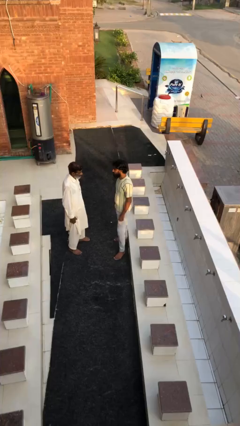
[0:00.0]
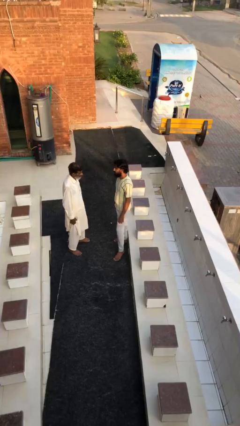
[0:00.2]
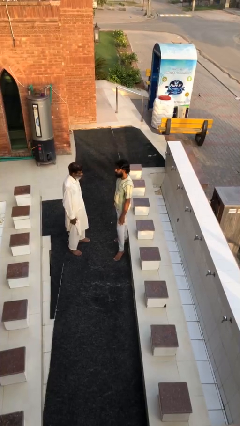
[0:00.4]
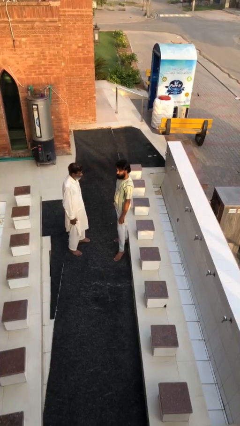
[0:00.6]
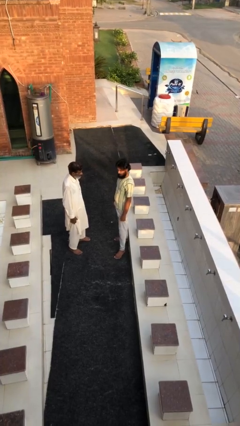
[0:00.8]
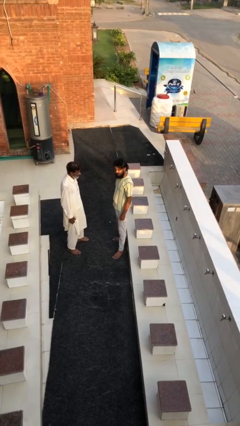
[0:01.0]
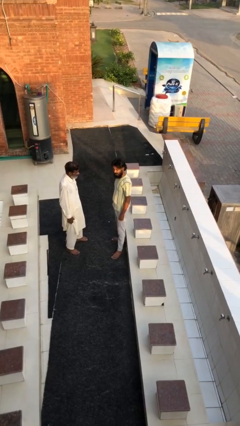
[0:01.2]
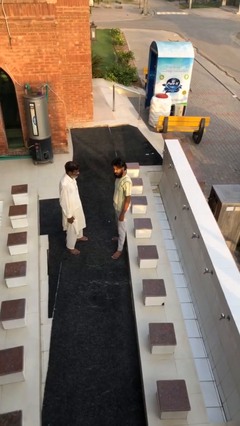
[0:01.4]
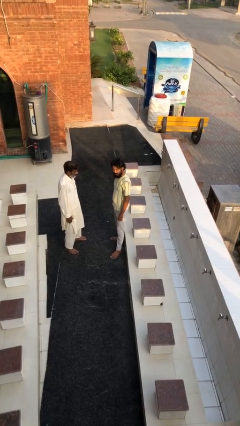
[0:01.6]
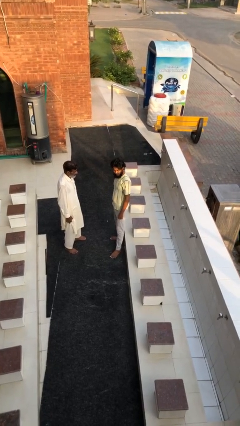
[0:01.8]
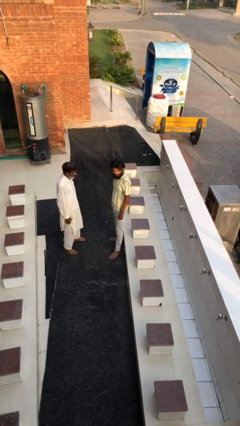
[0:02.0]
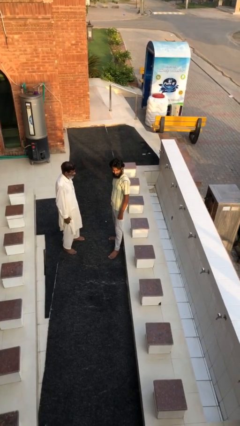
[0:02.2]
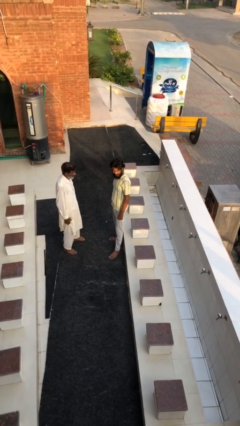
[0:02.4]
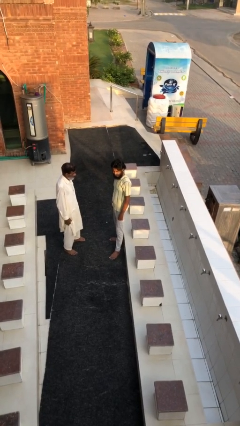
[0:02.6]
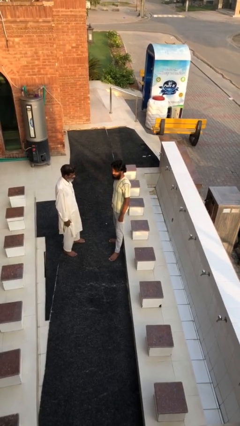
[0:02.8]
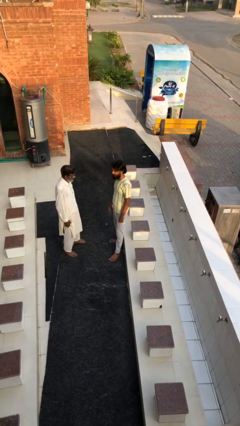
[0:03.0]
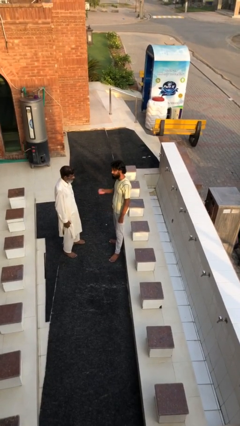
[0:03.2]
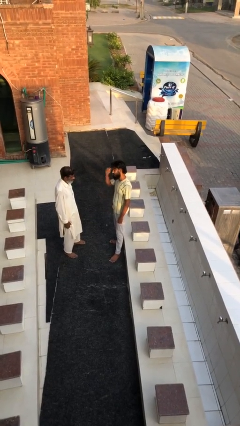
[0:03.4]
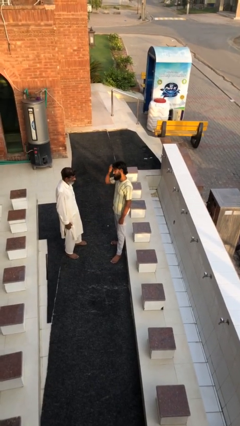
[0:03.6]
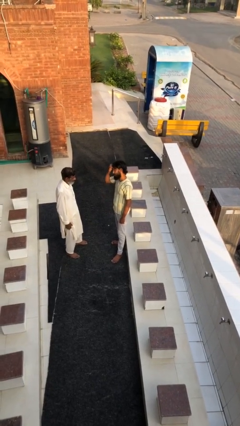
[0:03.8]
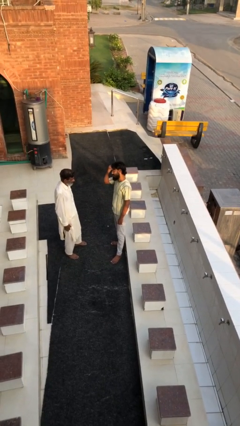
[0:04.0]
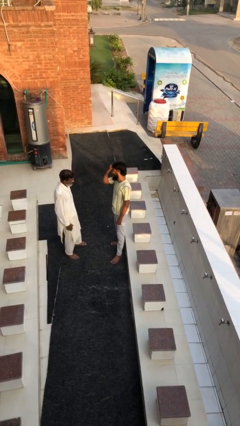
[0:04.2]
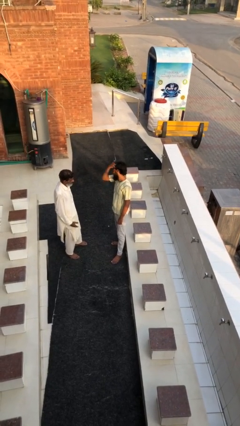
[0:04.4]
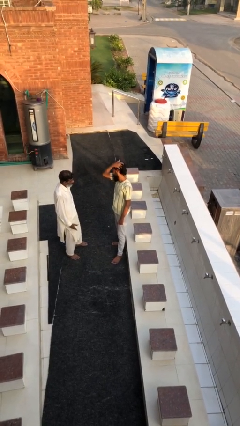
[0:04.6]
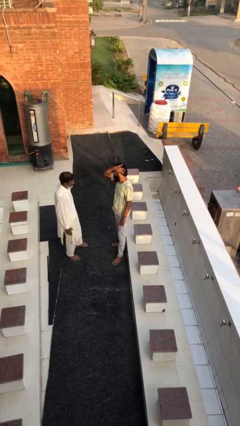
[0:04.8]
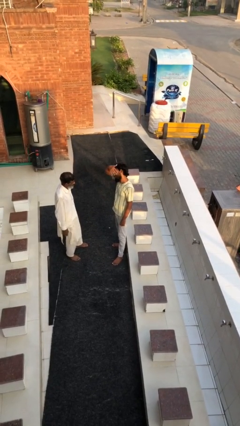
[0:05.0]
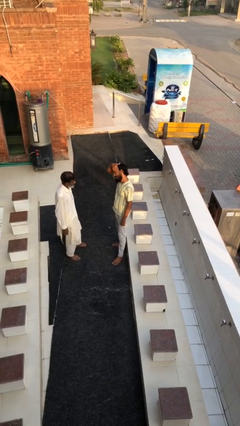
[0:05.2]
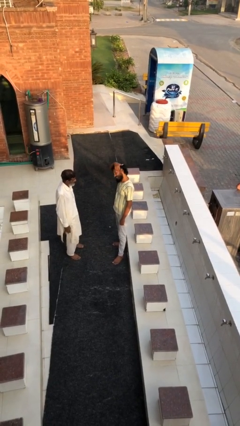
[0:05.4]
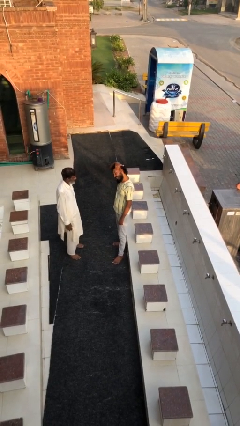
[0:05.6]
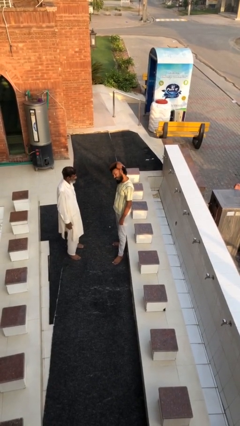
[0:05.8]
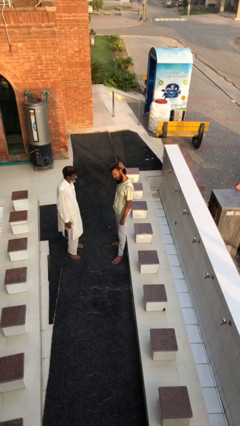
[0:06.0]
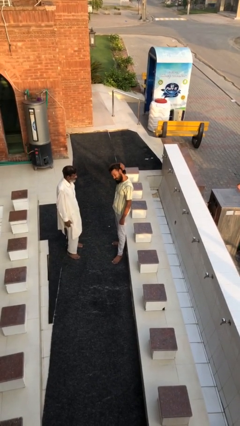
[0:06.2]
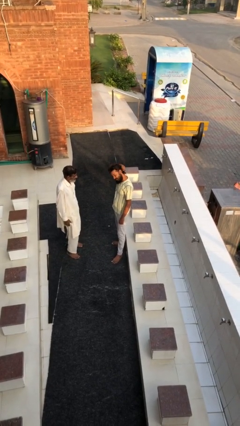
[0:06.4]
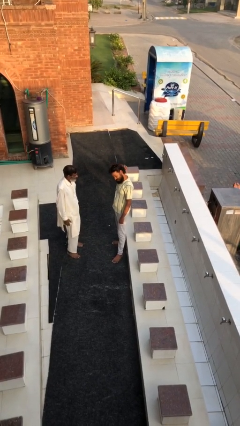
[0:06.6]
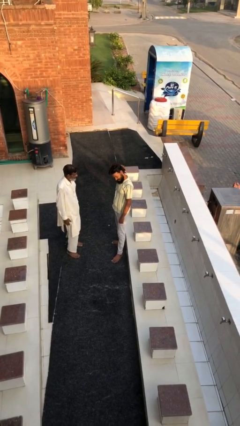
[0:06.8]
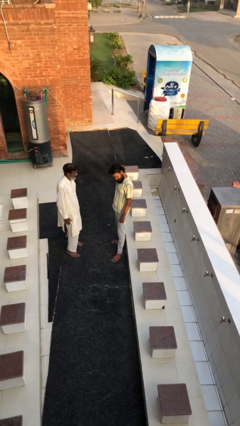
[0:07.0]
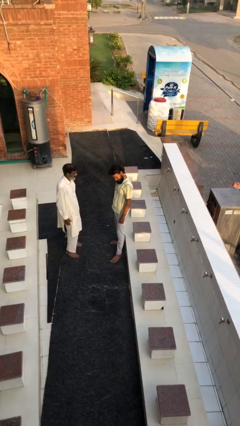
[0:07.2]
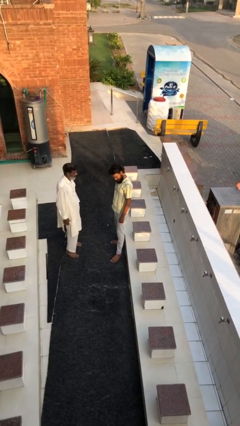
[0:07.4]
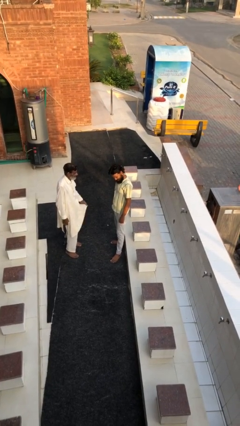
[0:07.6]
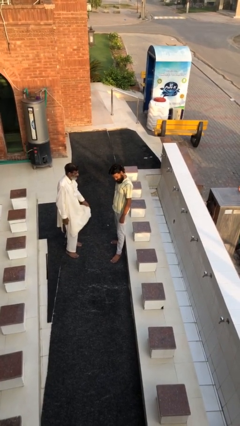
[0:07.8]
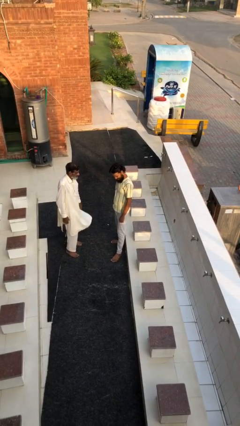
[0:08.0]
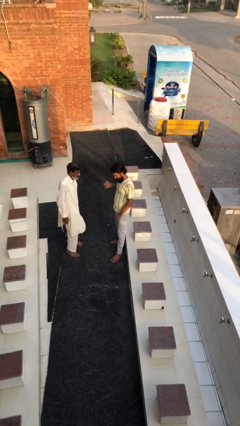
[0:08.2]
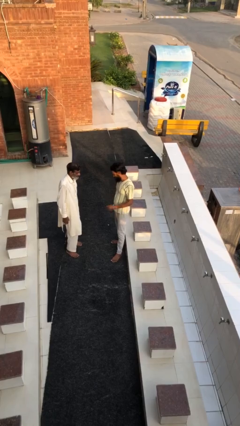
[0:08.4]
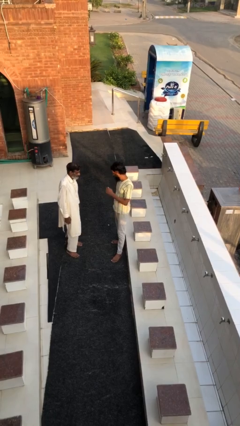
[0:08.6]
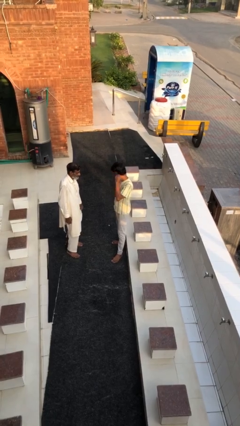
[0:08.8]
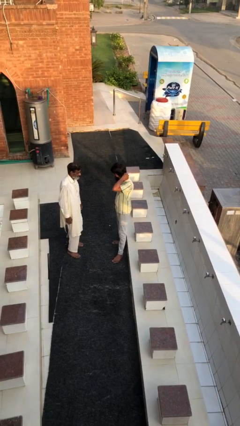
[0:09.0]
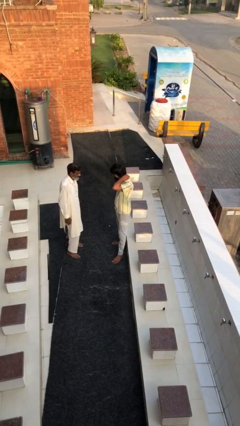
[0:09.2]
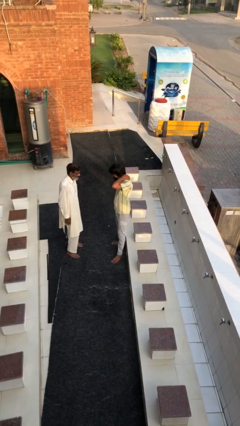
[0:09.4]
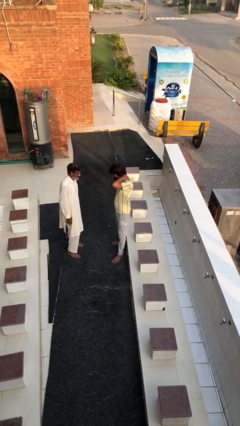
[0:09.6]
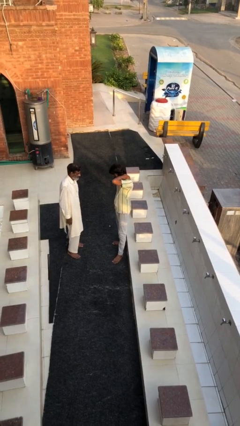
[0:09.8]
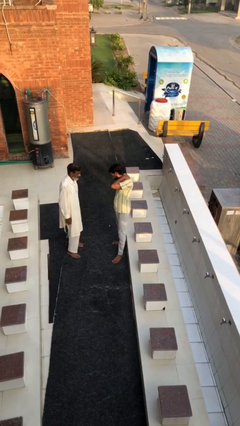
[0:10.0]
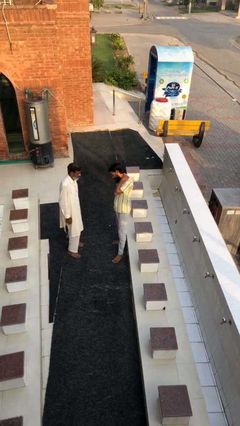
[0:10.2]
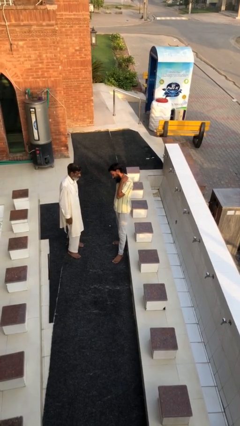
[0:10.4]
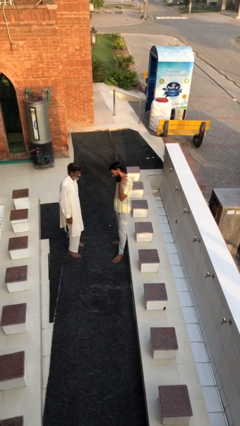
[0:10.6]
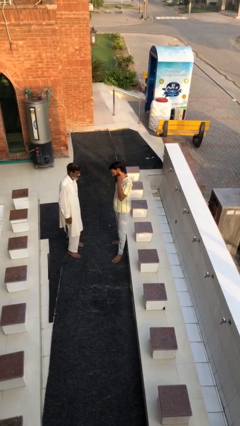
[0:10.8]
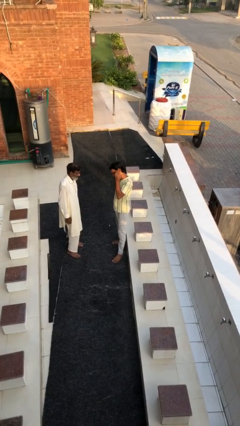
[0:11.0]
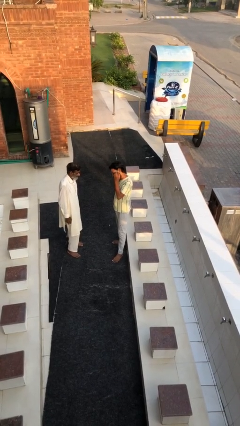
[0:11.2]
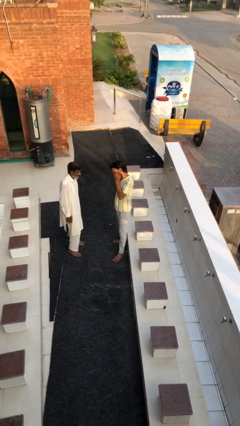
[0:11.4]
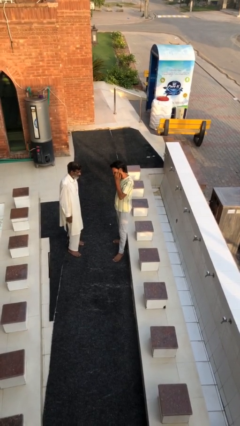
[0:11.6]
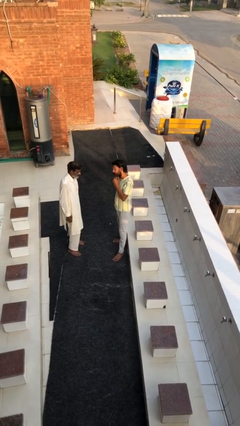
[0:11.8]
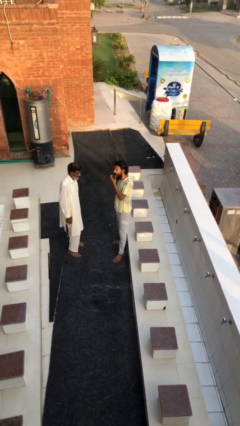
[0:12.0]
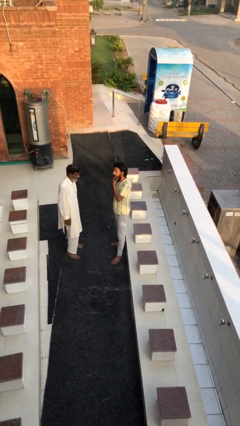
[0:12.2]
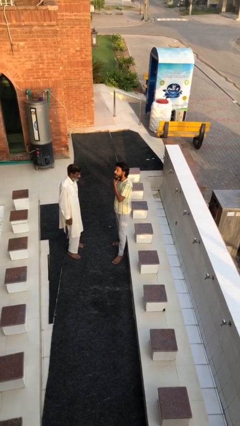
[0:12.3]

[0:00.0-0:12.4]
person talks to person

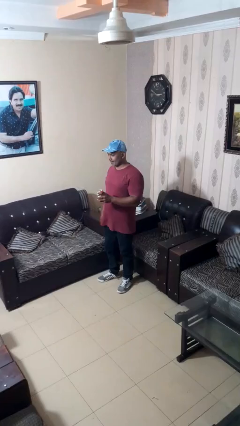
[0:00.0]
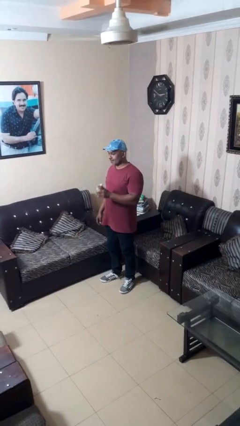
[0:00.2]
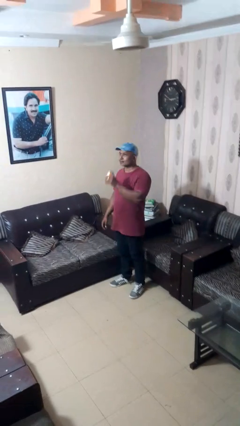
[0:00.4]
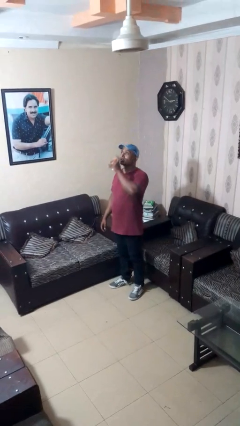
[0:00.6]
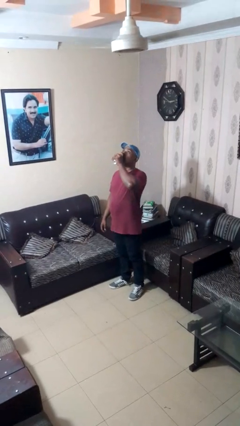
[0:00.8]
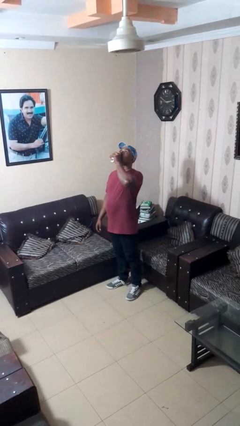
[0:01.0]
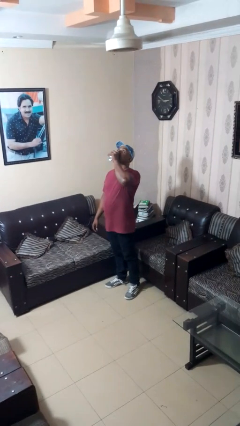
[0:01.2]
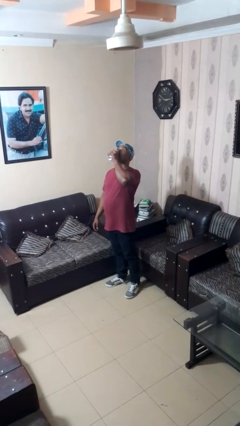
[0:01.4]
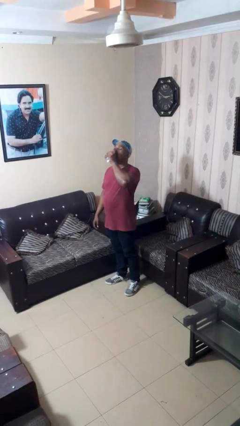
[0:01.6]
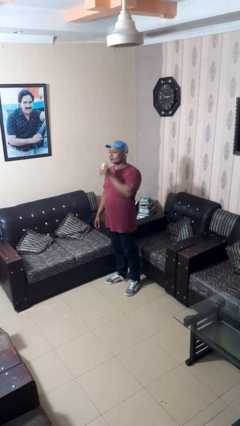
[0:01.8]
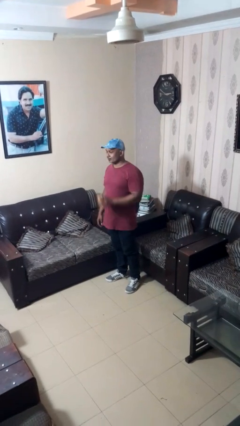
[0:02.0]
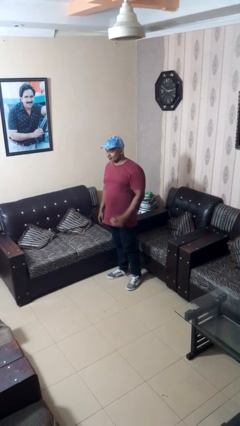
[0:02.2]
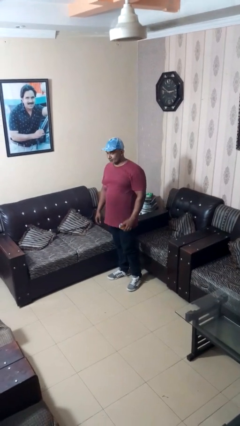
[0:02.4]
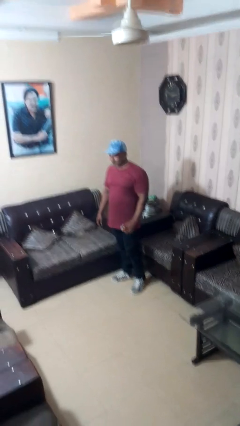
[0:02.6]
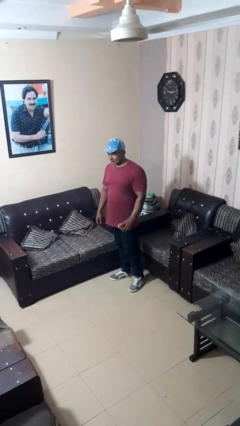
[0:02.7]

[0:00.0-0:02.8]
person drinks from beverage can

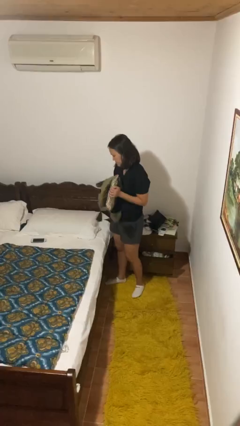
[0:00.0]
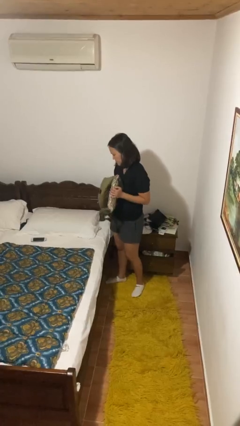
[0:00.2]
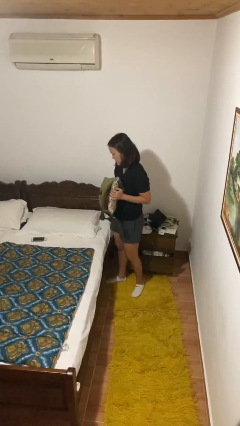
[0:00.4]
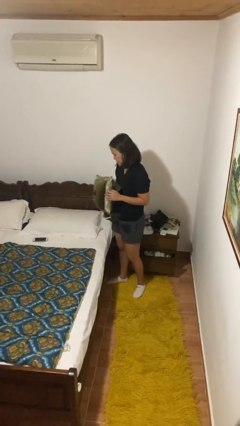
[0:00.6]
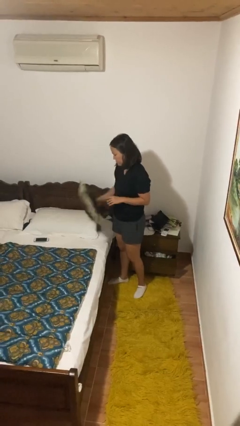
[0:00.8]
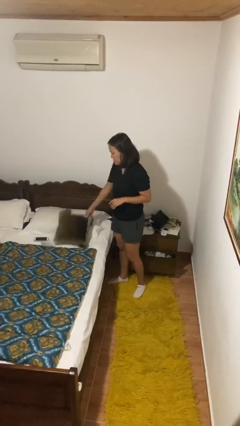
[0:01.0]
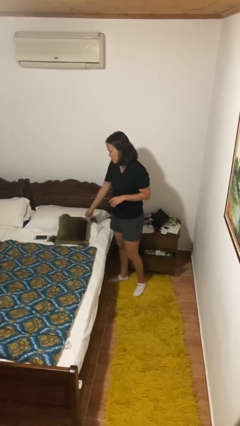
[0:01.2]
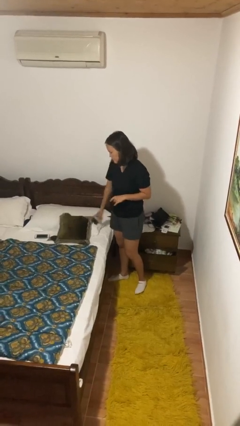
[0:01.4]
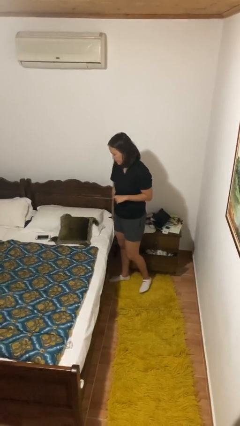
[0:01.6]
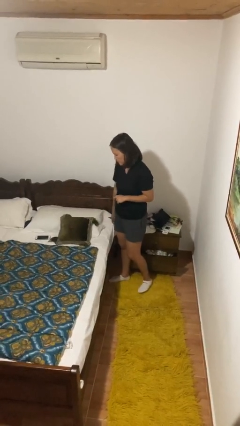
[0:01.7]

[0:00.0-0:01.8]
person puts down object on bed

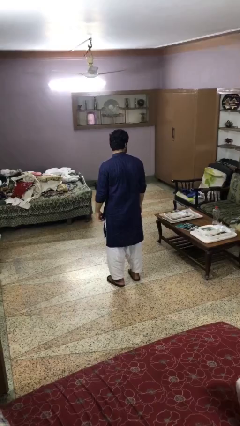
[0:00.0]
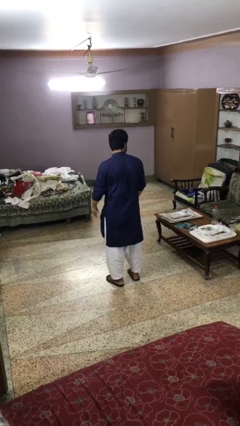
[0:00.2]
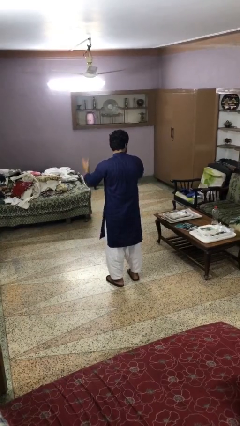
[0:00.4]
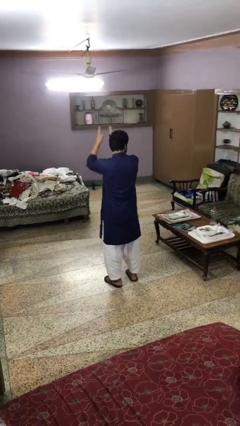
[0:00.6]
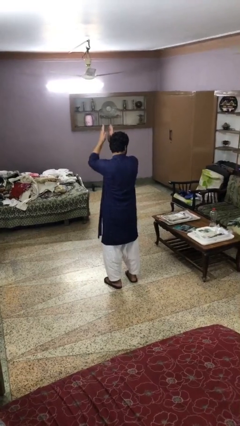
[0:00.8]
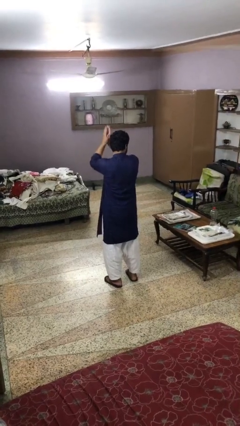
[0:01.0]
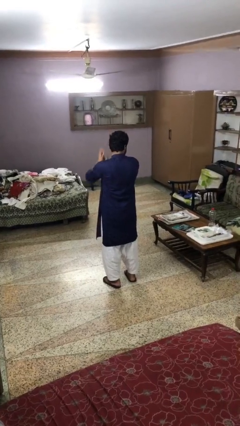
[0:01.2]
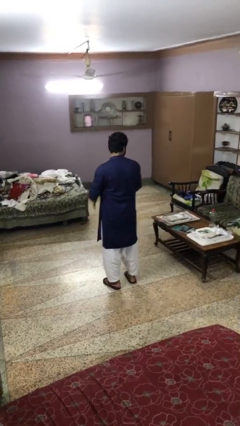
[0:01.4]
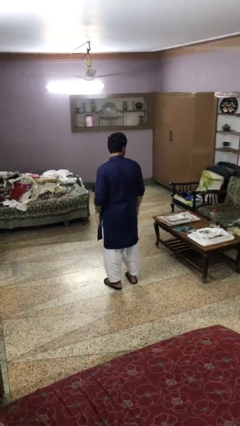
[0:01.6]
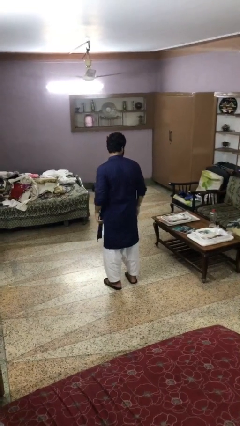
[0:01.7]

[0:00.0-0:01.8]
person claps hands
